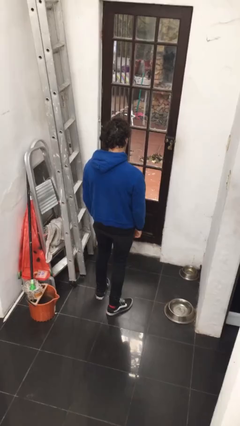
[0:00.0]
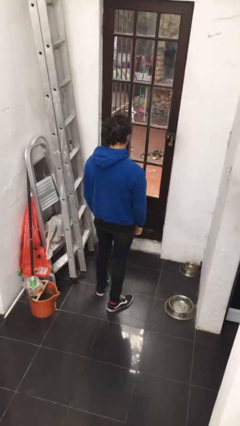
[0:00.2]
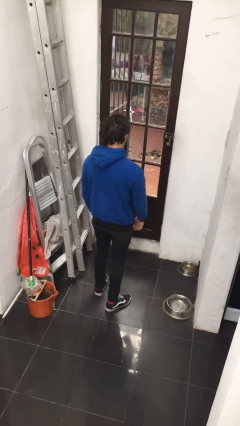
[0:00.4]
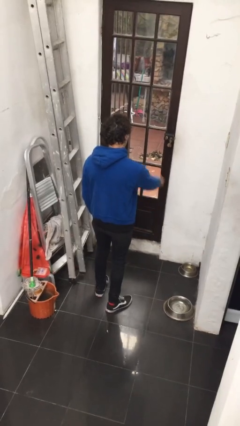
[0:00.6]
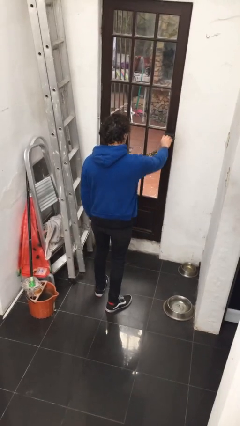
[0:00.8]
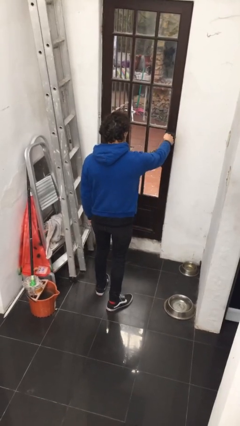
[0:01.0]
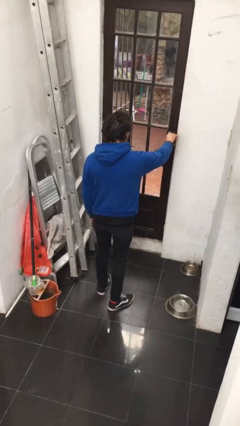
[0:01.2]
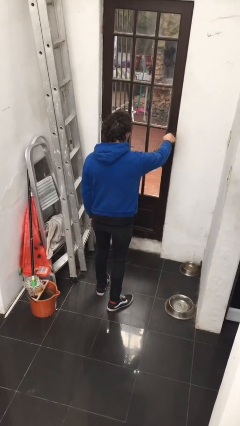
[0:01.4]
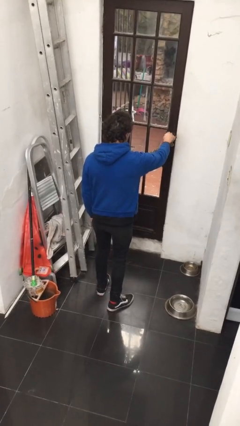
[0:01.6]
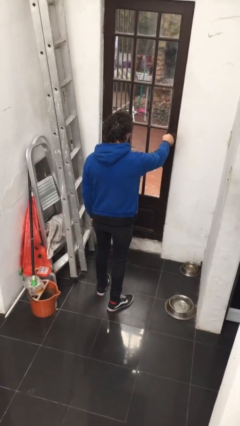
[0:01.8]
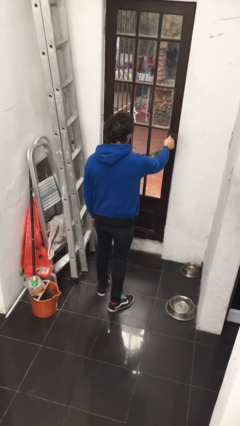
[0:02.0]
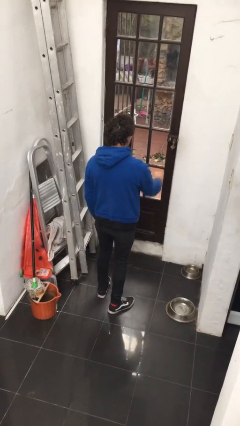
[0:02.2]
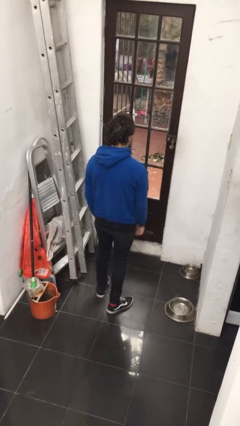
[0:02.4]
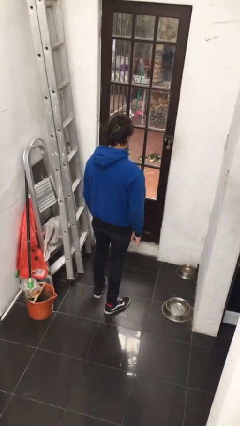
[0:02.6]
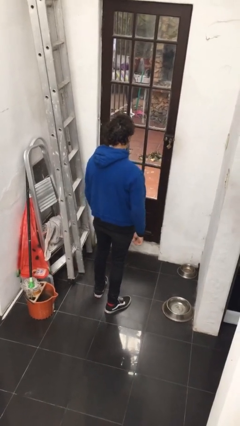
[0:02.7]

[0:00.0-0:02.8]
person locks door with keys

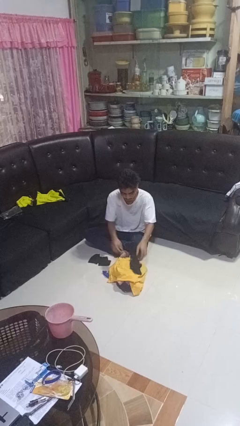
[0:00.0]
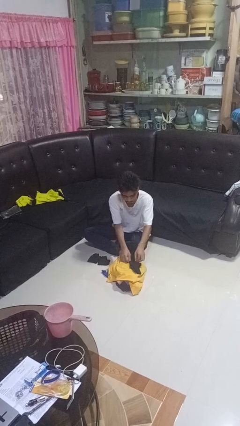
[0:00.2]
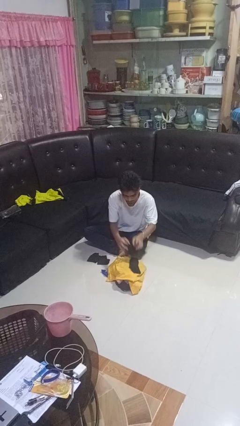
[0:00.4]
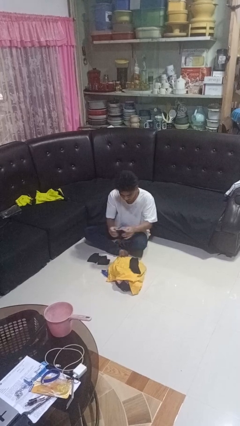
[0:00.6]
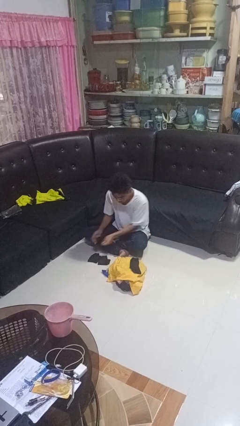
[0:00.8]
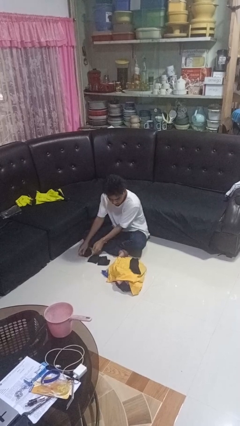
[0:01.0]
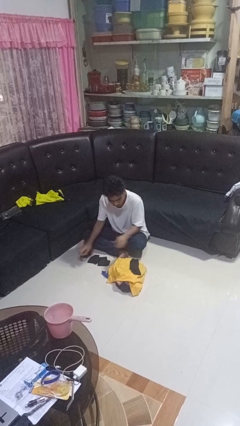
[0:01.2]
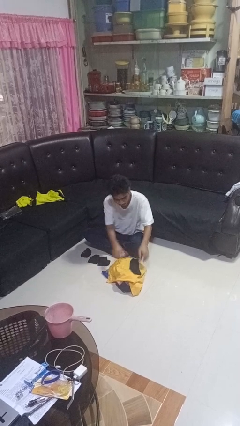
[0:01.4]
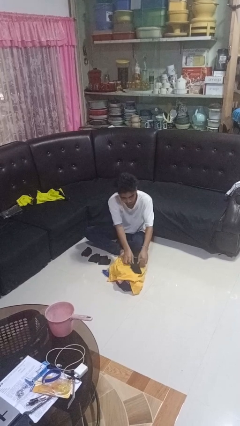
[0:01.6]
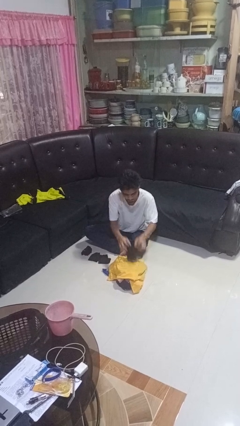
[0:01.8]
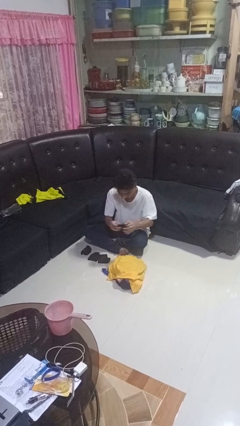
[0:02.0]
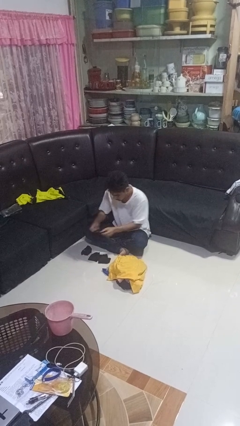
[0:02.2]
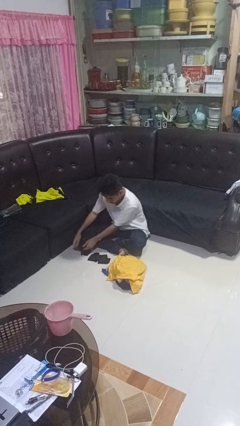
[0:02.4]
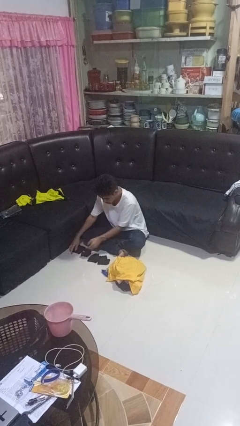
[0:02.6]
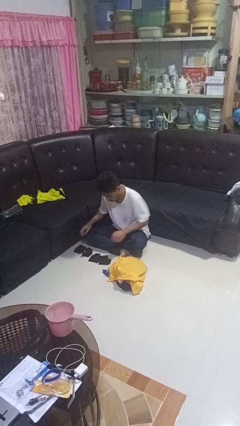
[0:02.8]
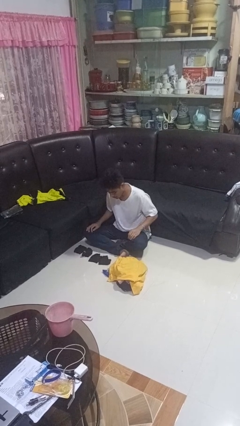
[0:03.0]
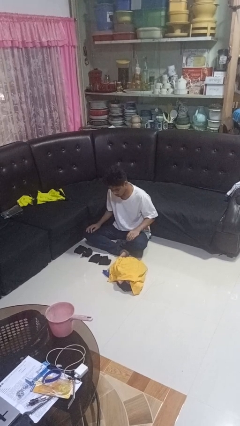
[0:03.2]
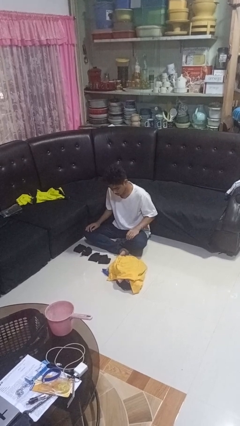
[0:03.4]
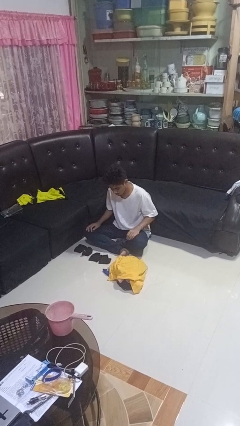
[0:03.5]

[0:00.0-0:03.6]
person folds socks

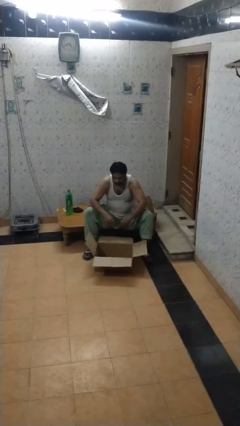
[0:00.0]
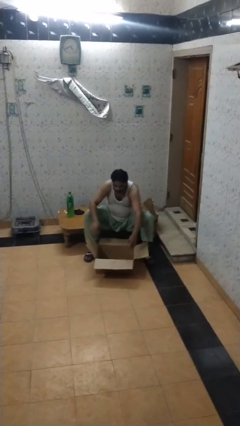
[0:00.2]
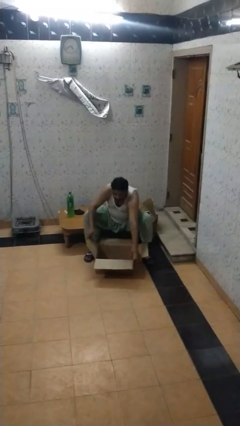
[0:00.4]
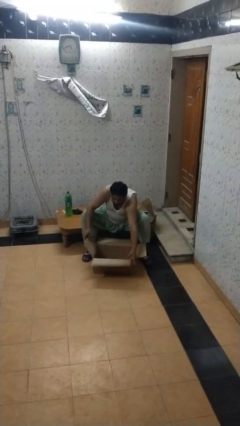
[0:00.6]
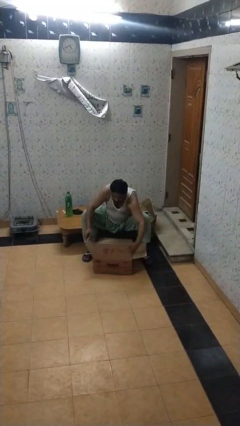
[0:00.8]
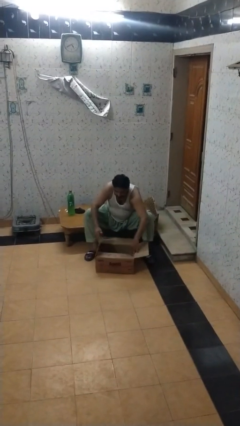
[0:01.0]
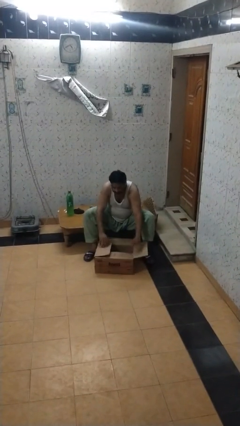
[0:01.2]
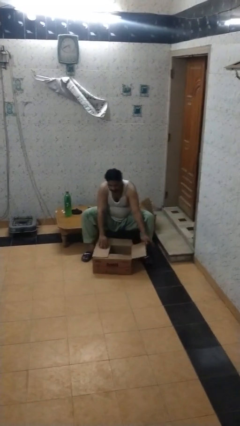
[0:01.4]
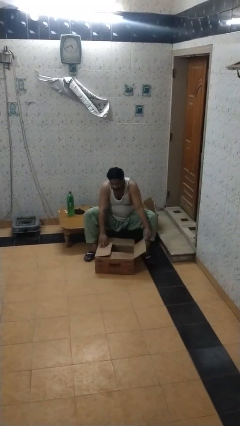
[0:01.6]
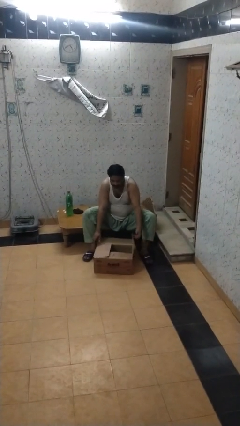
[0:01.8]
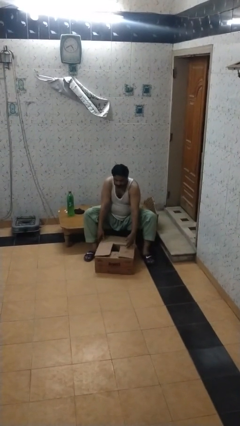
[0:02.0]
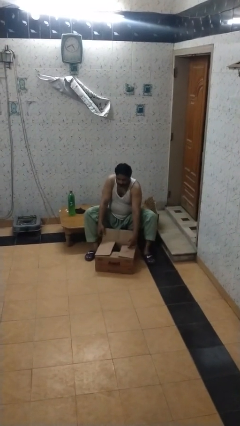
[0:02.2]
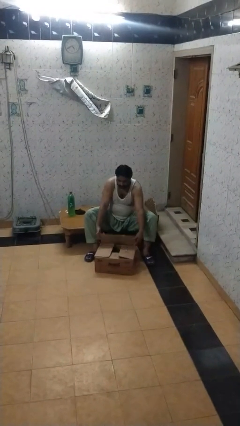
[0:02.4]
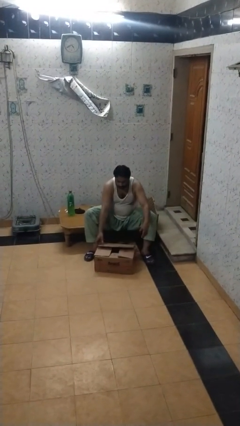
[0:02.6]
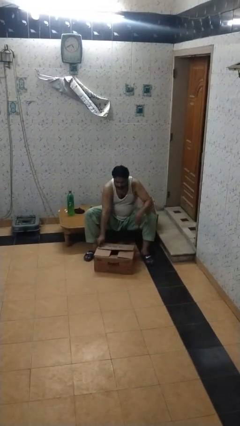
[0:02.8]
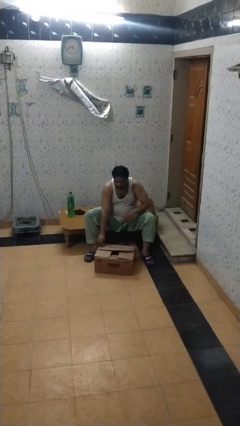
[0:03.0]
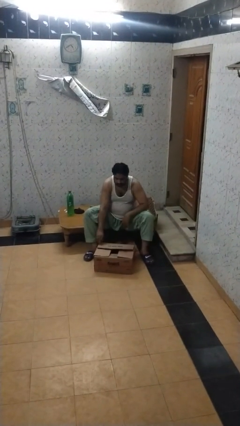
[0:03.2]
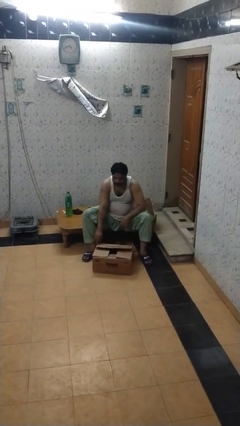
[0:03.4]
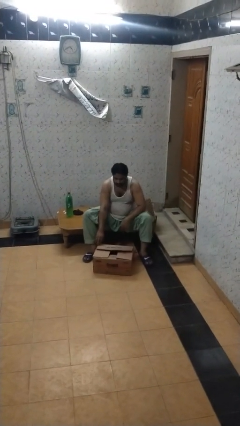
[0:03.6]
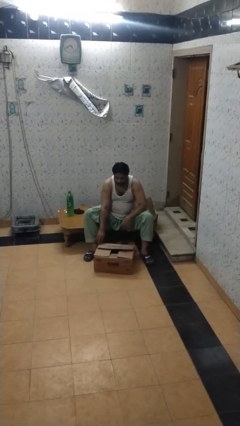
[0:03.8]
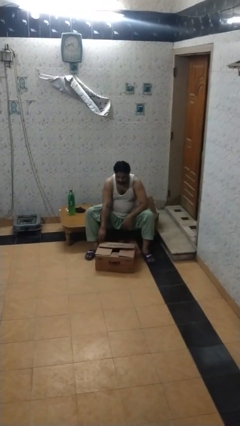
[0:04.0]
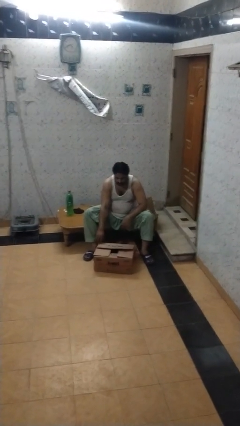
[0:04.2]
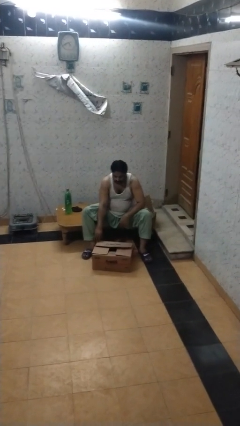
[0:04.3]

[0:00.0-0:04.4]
person closes box

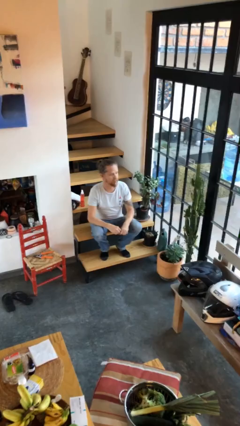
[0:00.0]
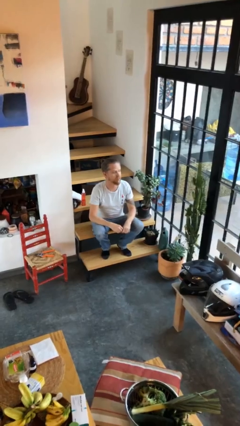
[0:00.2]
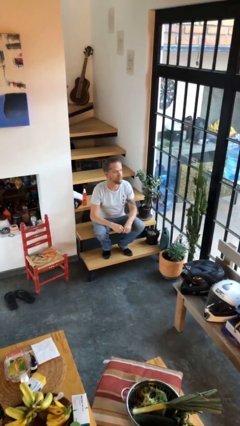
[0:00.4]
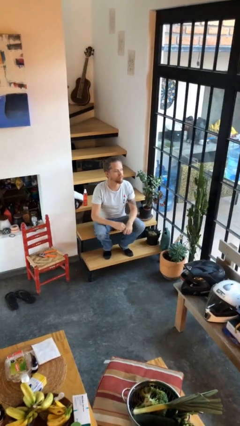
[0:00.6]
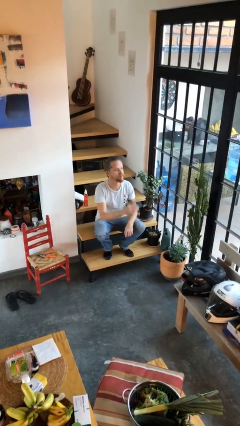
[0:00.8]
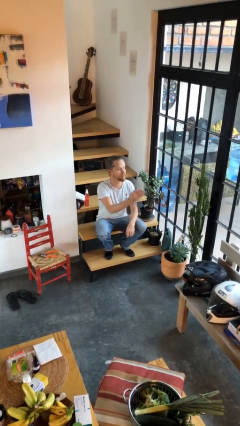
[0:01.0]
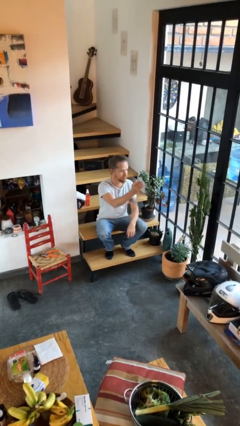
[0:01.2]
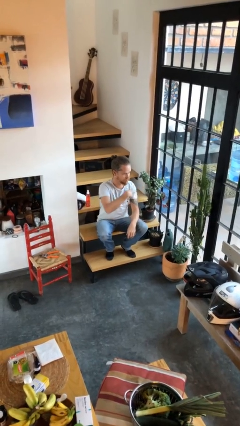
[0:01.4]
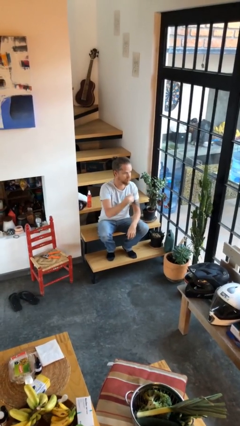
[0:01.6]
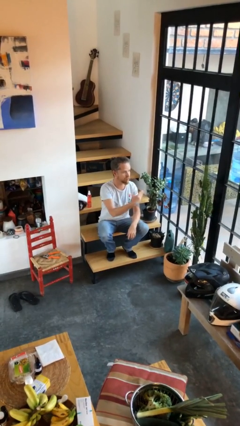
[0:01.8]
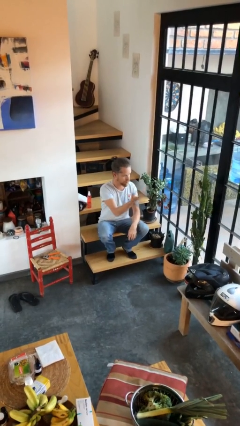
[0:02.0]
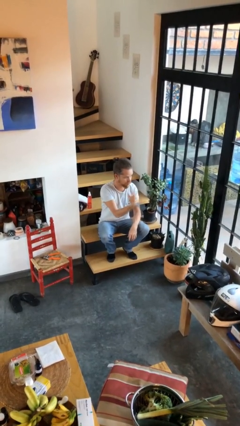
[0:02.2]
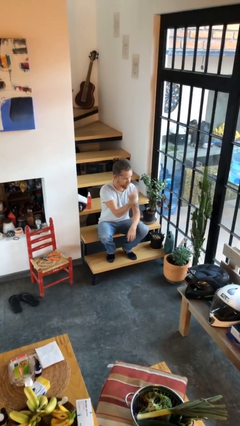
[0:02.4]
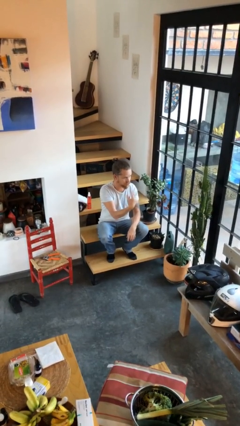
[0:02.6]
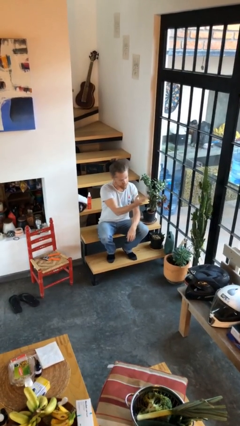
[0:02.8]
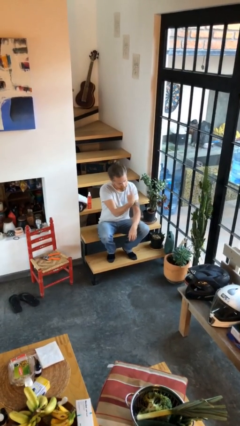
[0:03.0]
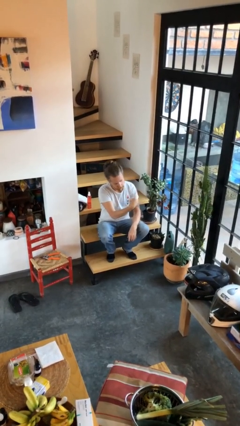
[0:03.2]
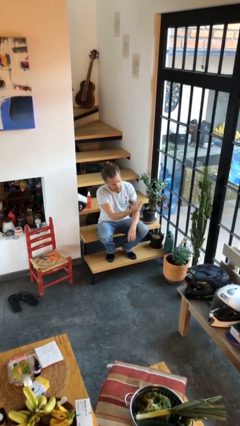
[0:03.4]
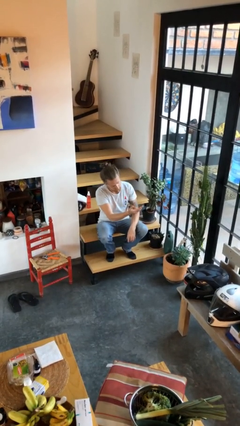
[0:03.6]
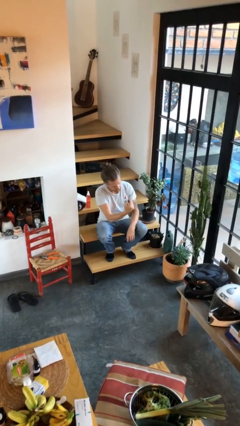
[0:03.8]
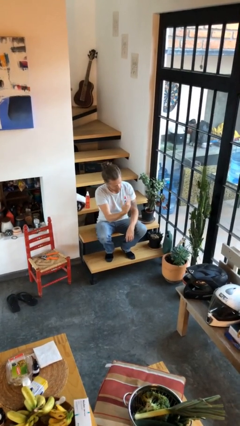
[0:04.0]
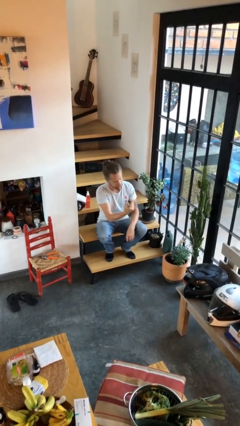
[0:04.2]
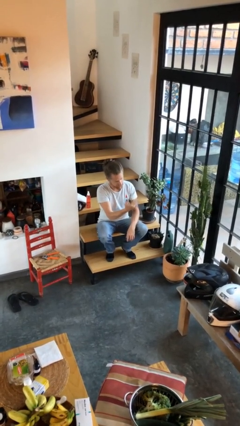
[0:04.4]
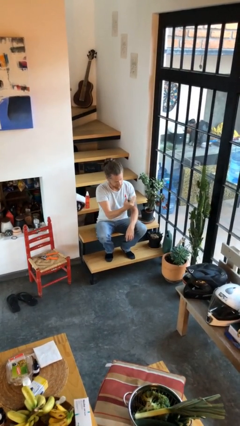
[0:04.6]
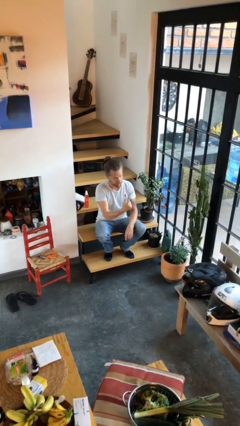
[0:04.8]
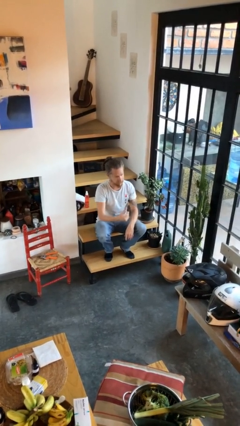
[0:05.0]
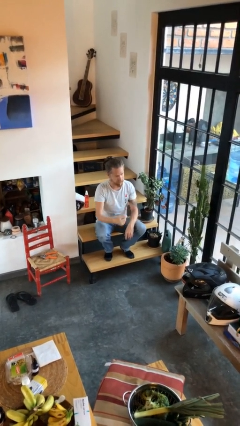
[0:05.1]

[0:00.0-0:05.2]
person gestures come here

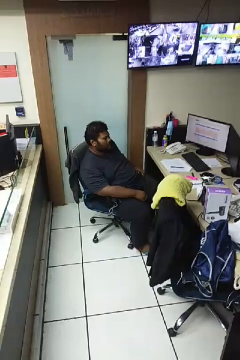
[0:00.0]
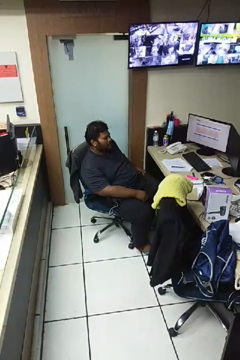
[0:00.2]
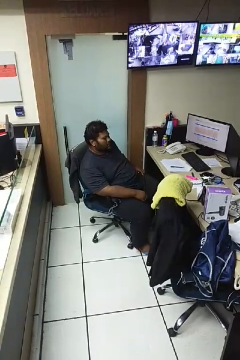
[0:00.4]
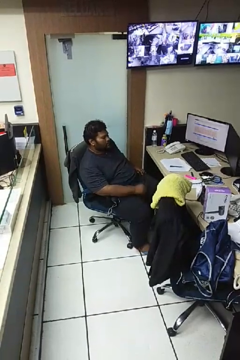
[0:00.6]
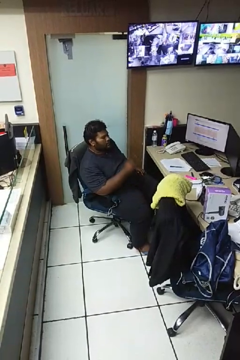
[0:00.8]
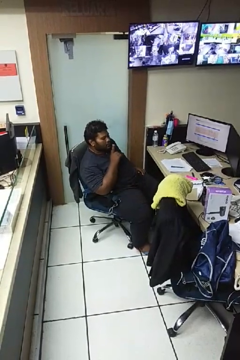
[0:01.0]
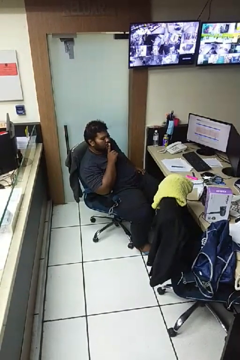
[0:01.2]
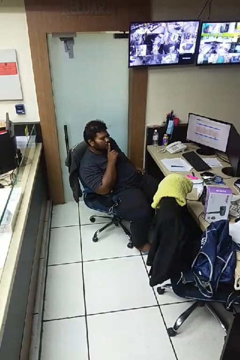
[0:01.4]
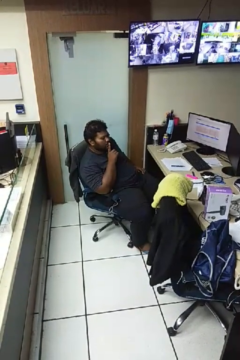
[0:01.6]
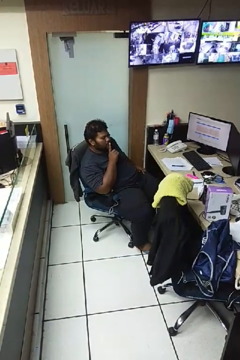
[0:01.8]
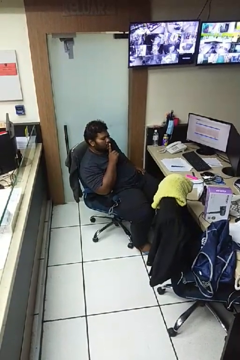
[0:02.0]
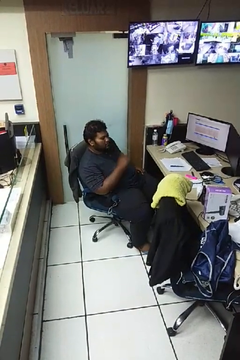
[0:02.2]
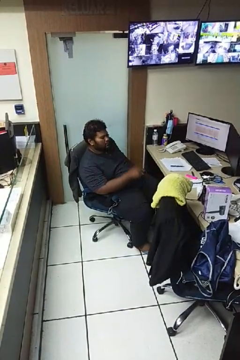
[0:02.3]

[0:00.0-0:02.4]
person gestures be quiet
